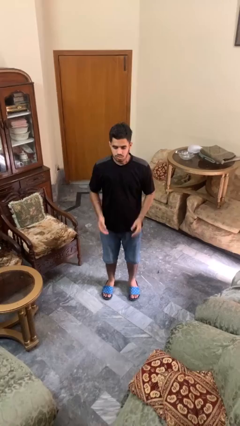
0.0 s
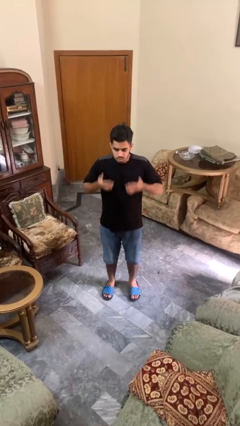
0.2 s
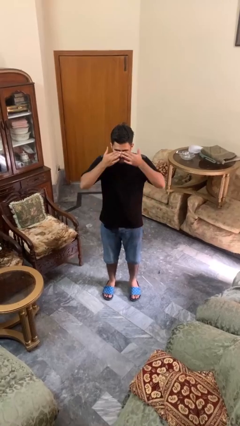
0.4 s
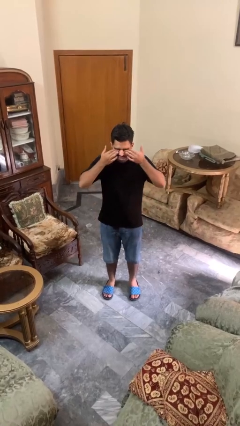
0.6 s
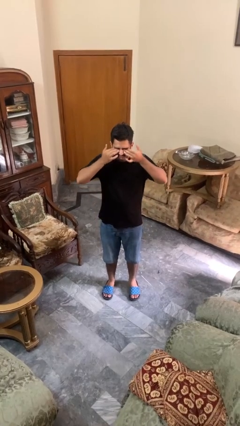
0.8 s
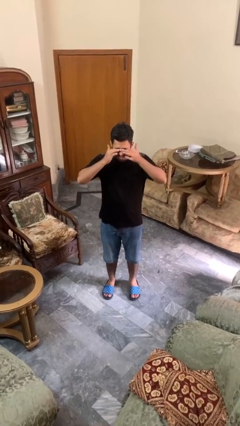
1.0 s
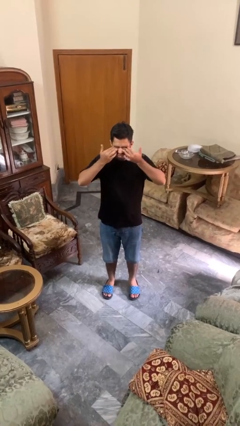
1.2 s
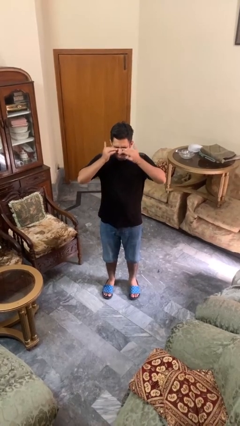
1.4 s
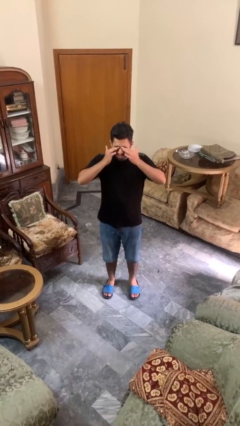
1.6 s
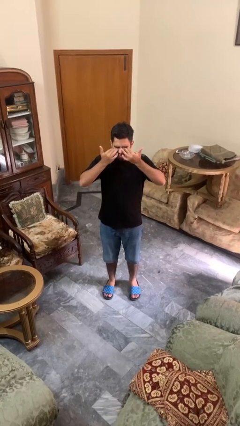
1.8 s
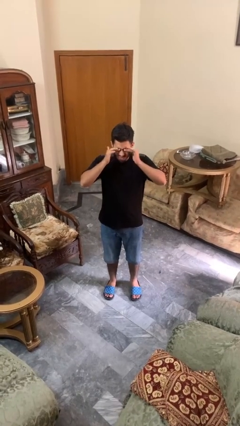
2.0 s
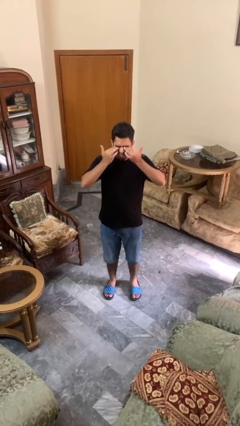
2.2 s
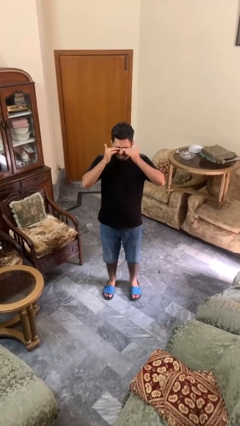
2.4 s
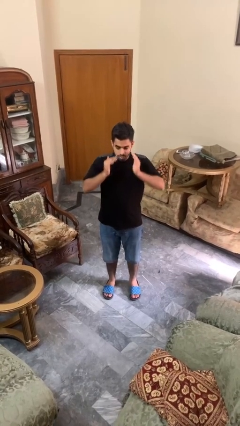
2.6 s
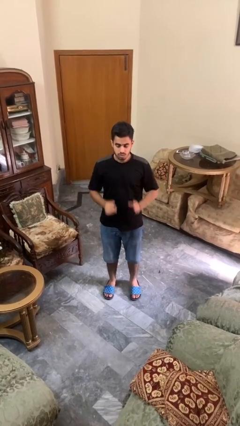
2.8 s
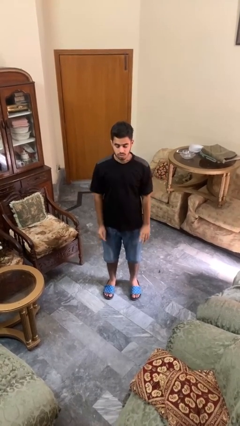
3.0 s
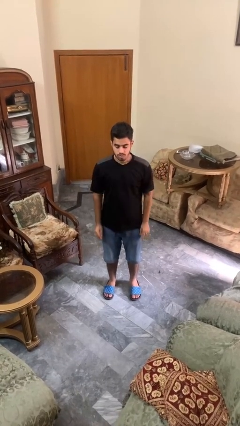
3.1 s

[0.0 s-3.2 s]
person rubs eyes

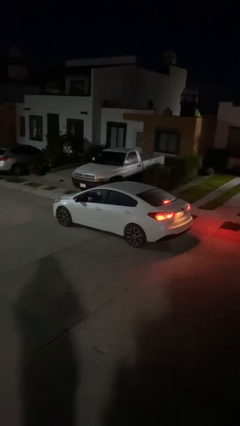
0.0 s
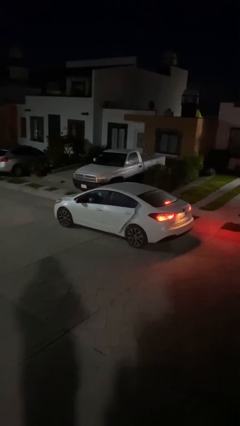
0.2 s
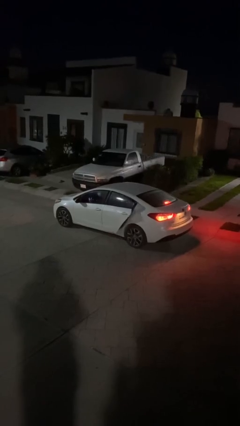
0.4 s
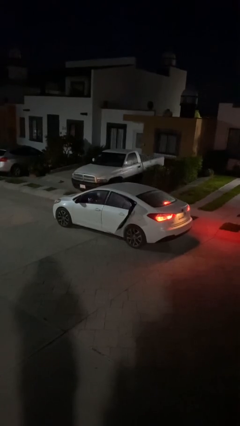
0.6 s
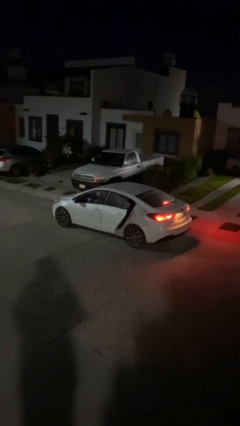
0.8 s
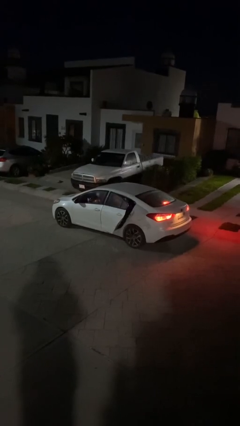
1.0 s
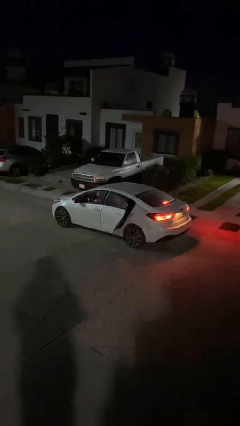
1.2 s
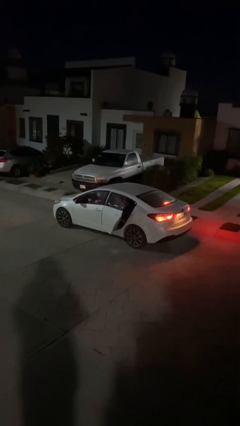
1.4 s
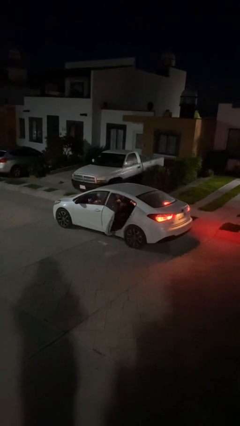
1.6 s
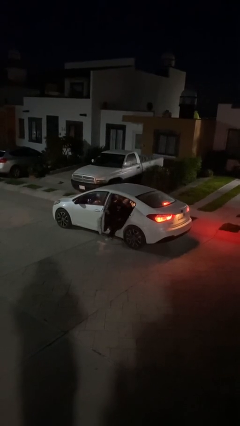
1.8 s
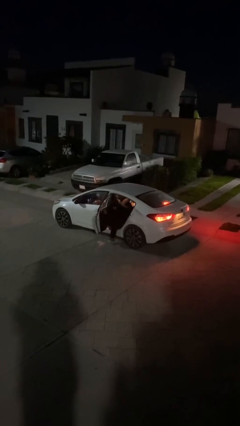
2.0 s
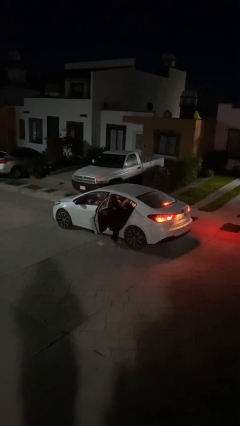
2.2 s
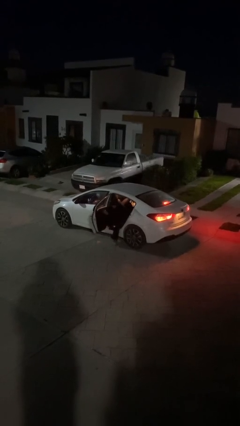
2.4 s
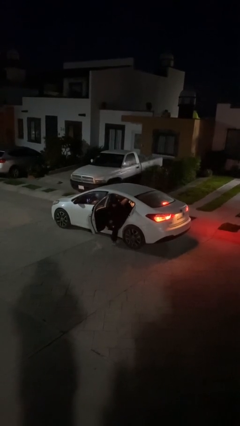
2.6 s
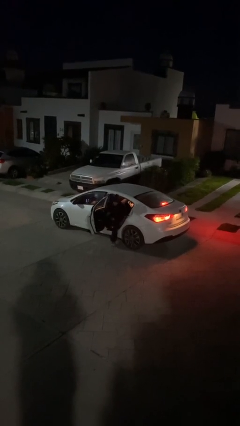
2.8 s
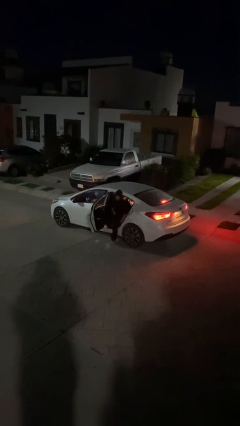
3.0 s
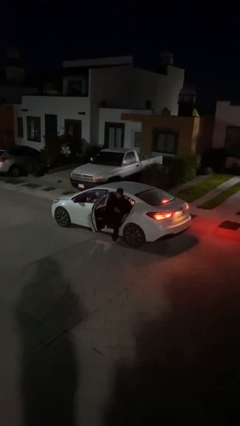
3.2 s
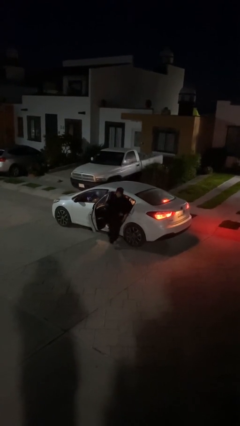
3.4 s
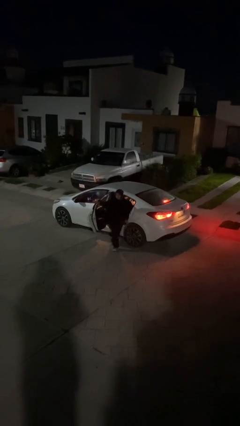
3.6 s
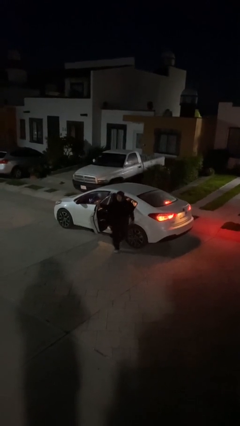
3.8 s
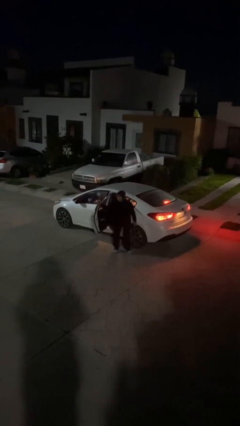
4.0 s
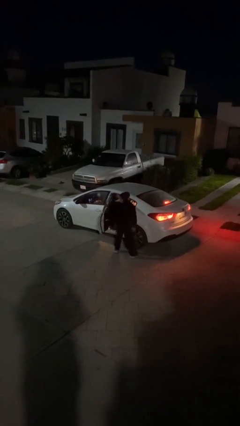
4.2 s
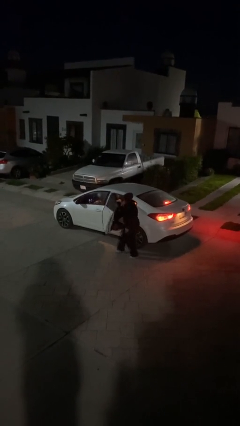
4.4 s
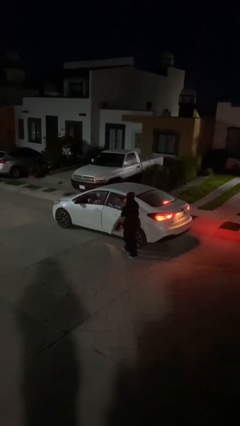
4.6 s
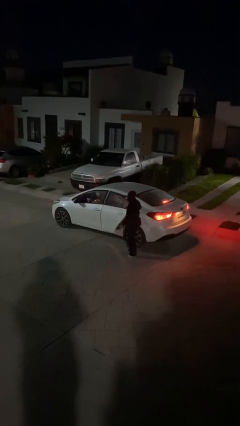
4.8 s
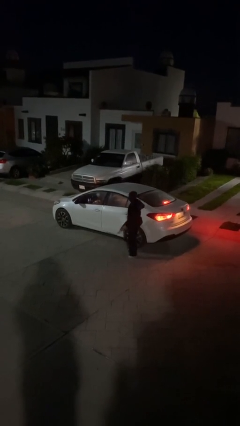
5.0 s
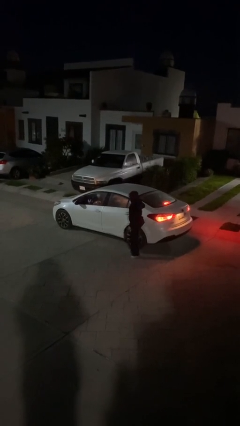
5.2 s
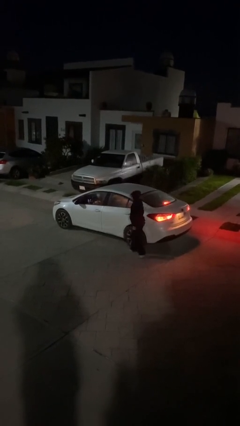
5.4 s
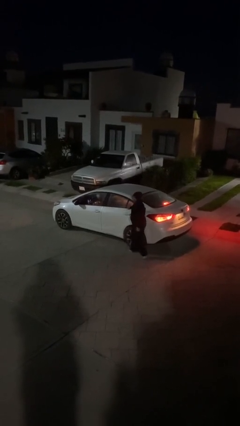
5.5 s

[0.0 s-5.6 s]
car drops off person

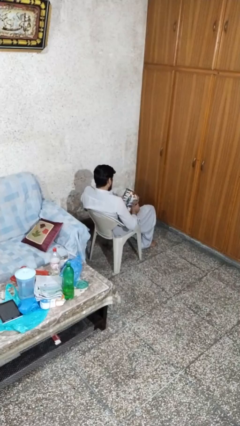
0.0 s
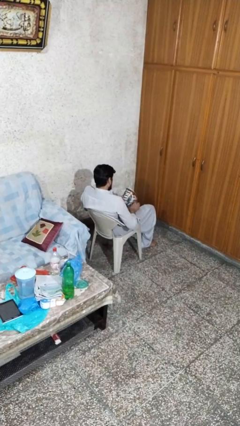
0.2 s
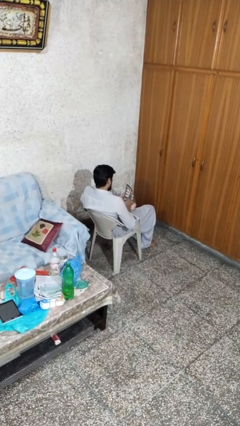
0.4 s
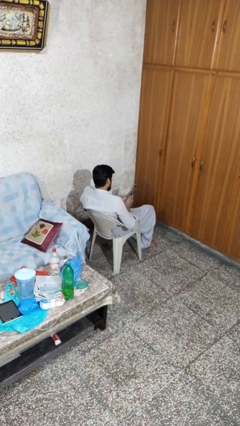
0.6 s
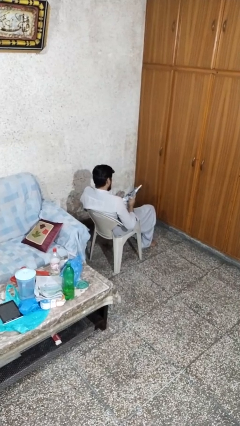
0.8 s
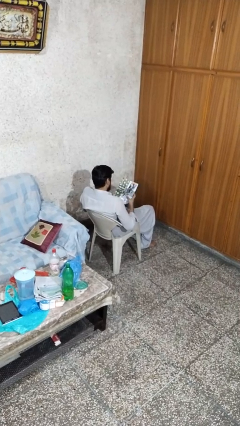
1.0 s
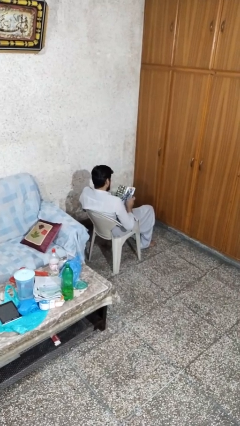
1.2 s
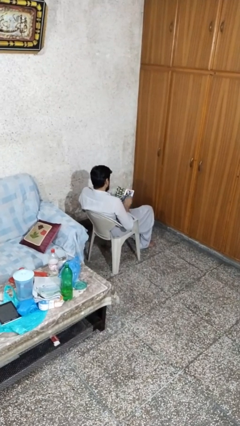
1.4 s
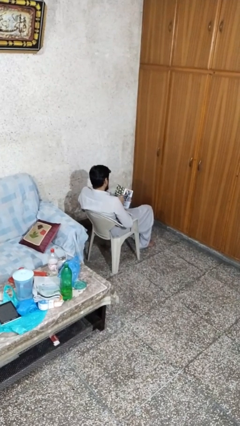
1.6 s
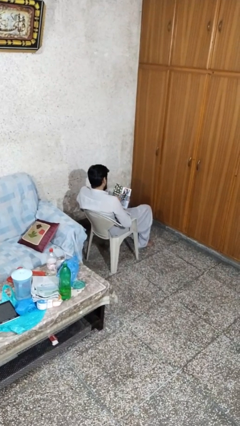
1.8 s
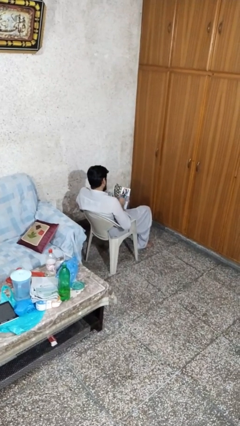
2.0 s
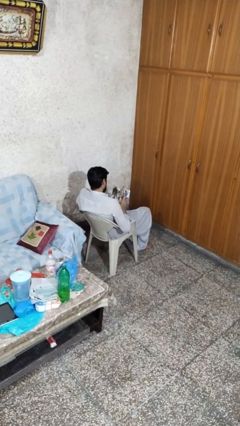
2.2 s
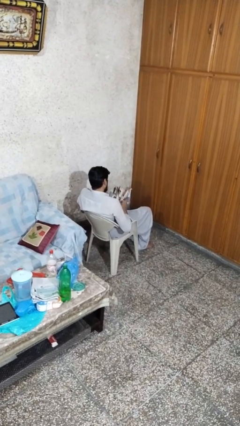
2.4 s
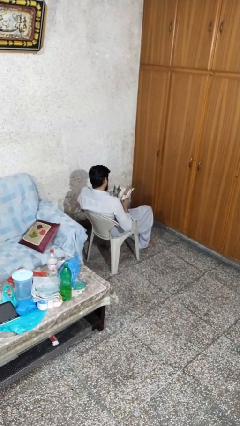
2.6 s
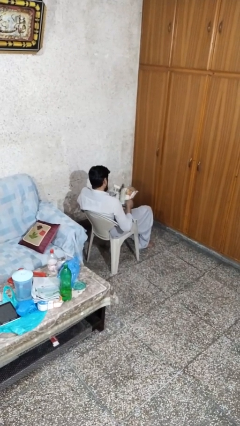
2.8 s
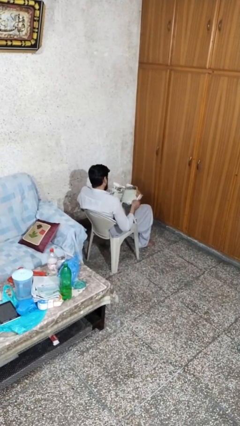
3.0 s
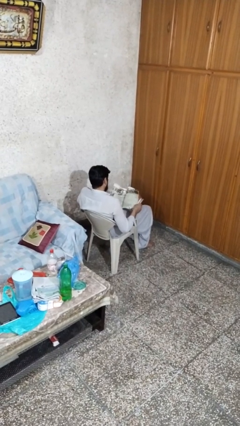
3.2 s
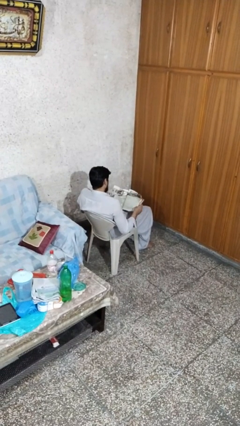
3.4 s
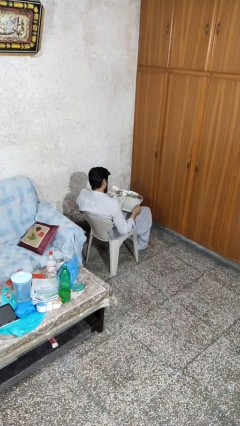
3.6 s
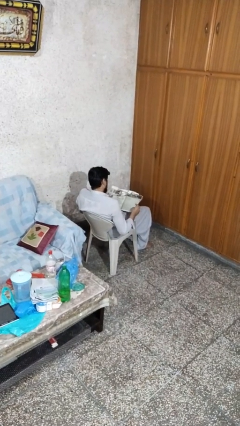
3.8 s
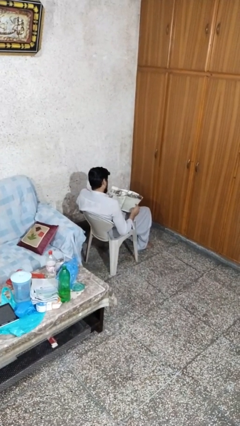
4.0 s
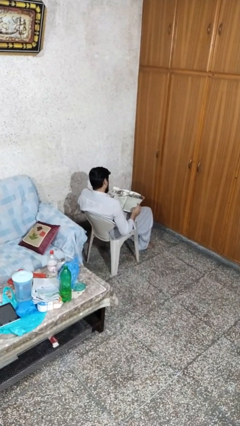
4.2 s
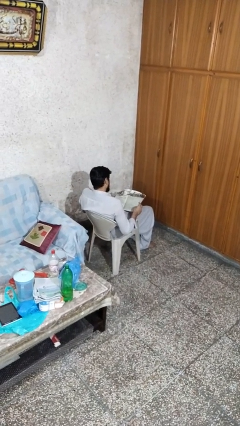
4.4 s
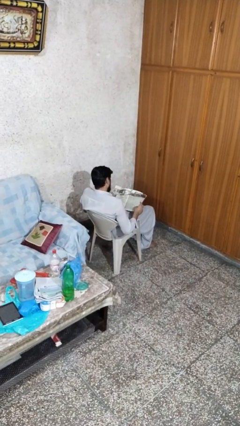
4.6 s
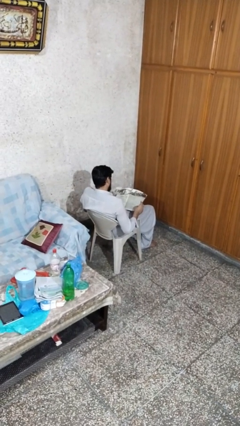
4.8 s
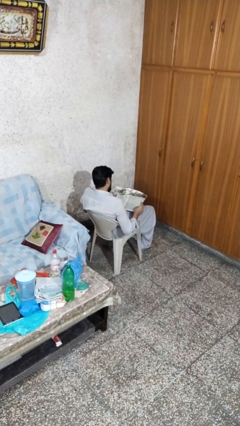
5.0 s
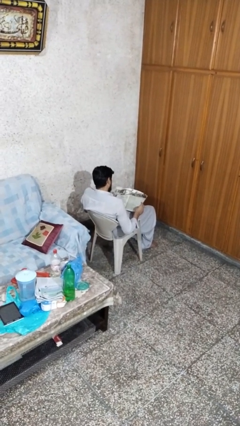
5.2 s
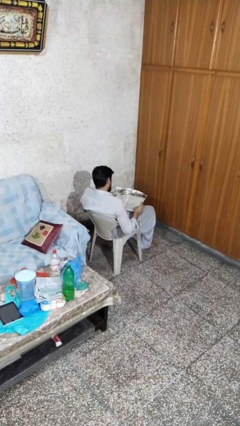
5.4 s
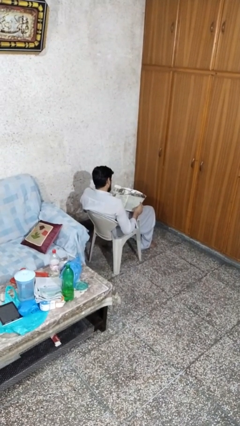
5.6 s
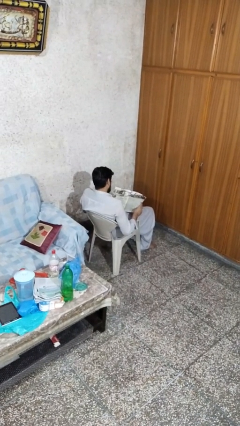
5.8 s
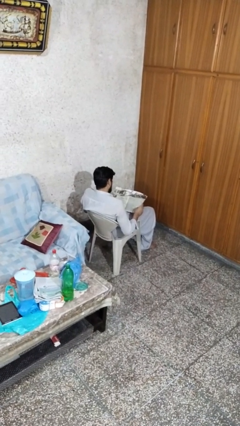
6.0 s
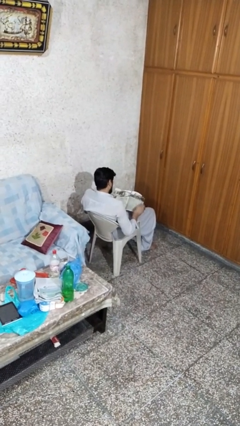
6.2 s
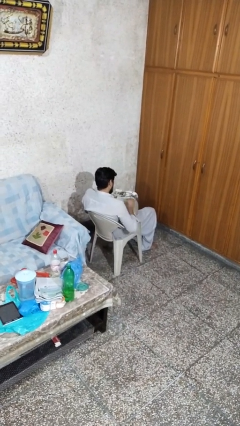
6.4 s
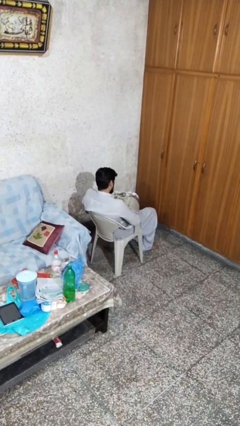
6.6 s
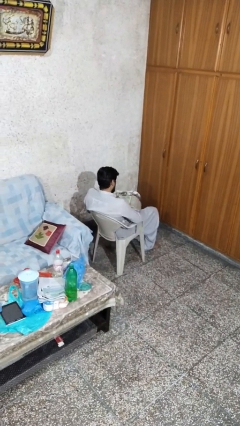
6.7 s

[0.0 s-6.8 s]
person reads magazine

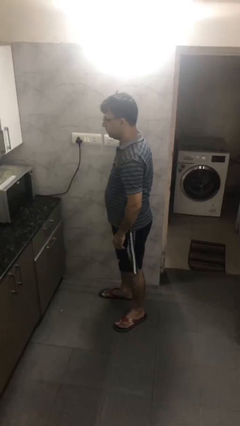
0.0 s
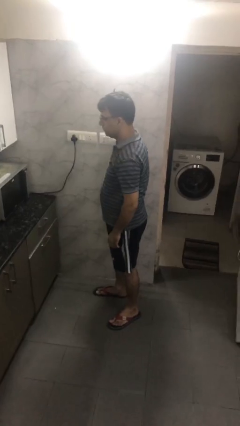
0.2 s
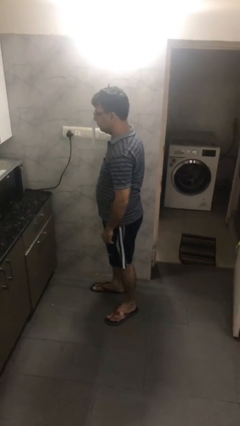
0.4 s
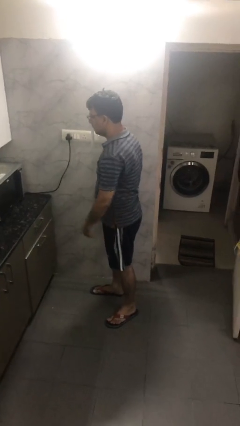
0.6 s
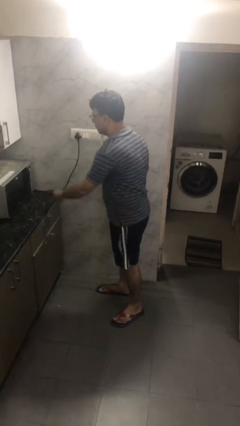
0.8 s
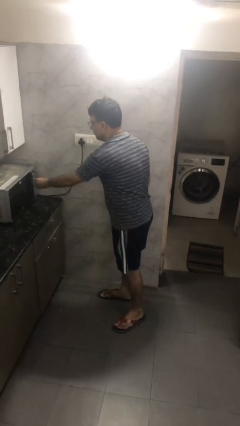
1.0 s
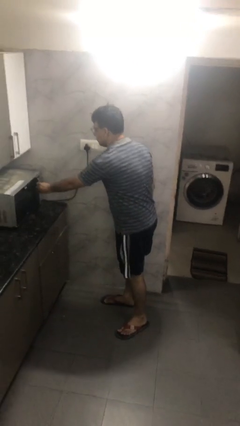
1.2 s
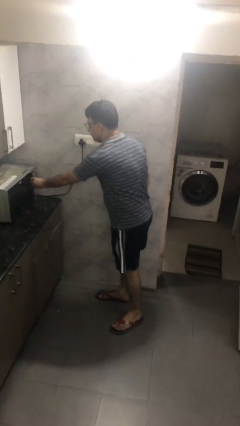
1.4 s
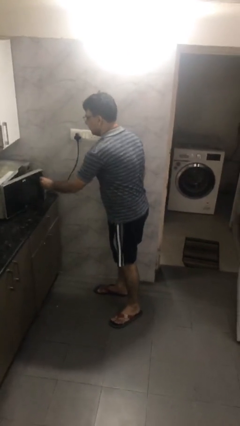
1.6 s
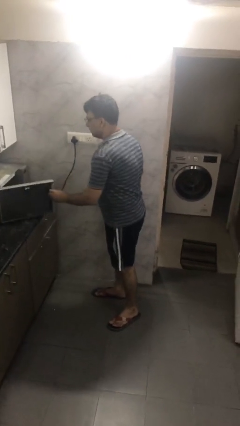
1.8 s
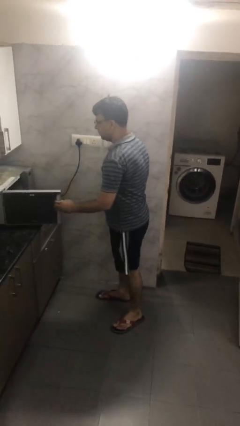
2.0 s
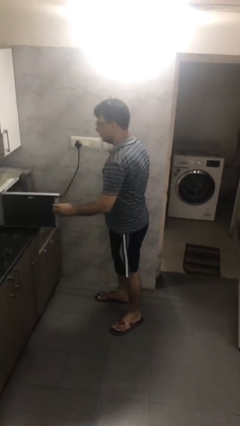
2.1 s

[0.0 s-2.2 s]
person opens microwave
